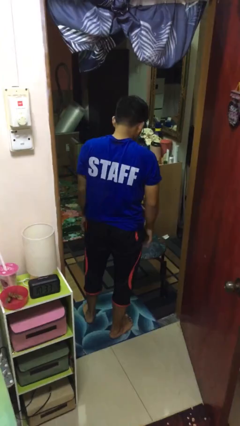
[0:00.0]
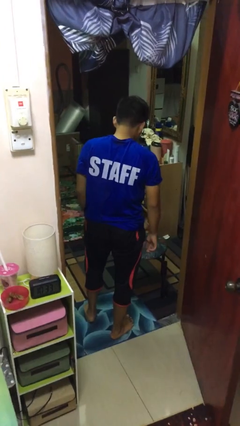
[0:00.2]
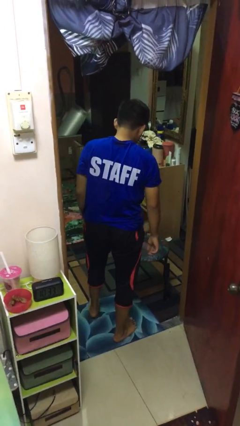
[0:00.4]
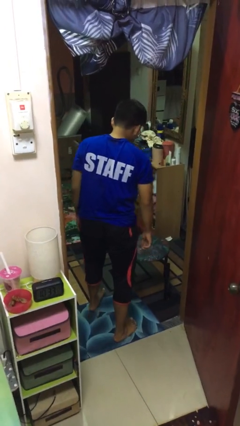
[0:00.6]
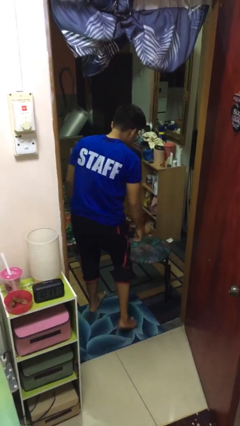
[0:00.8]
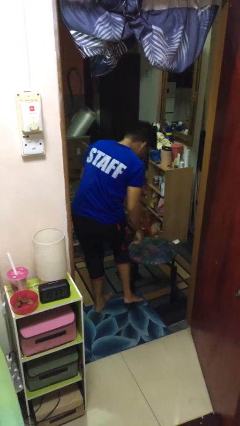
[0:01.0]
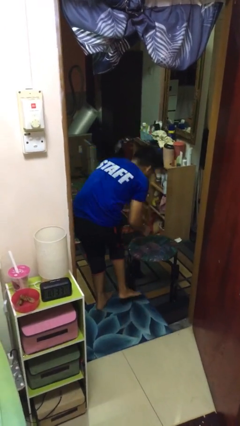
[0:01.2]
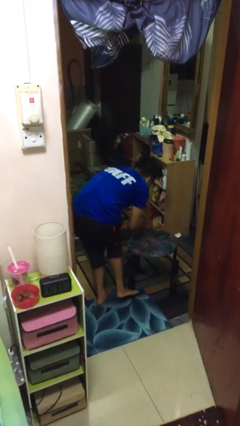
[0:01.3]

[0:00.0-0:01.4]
person trips on object on floor

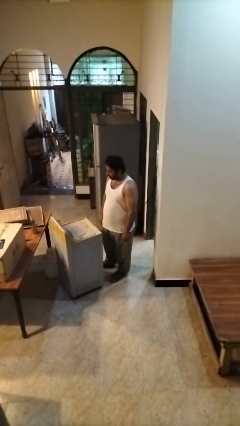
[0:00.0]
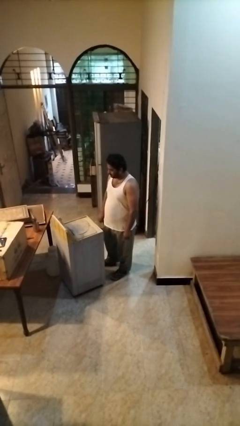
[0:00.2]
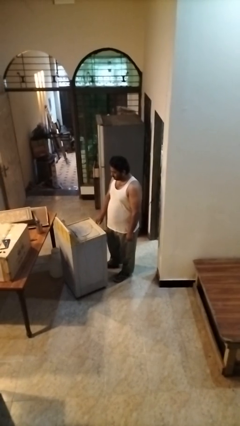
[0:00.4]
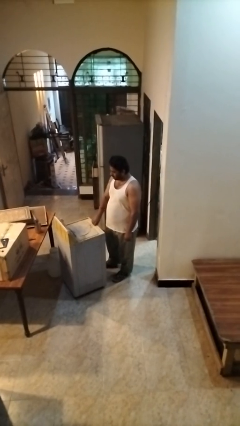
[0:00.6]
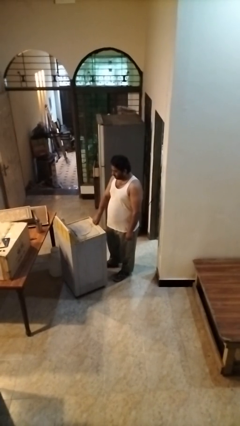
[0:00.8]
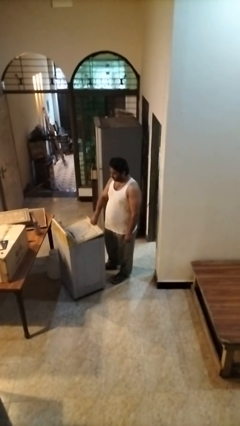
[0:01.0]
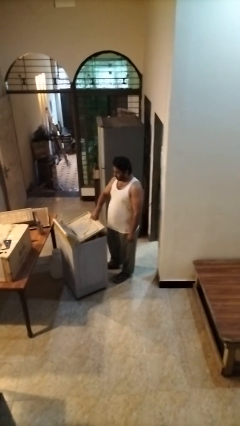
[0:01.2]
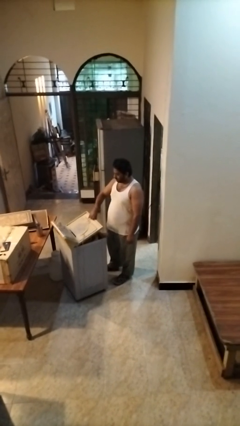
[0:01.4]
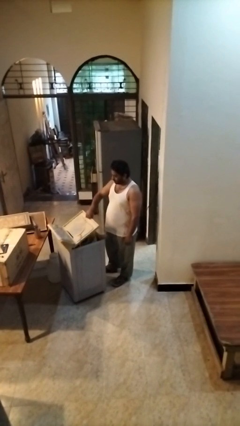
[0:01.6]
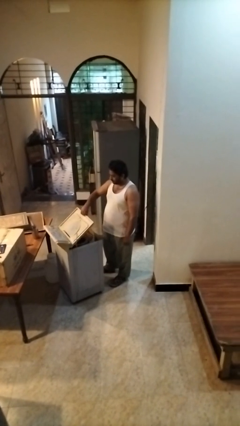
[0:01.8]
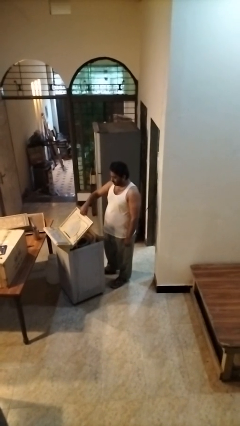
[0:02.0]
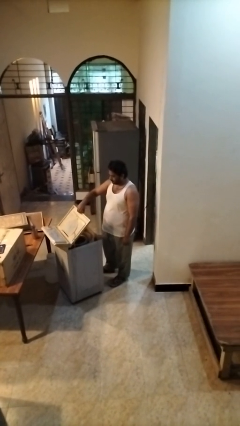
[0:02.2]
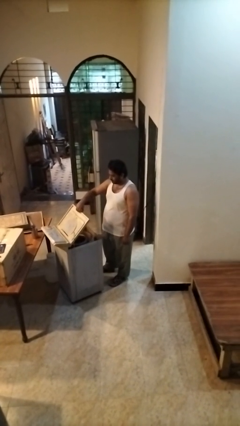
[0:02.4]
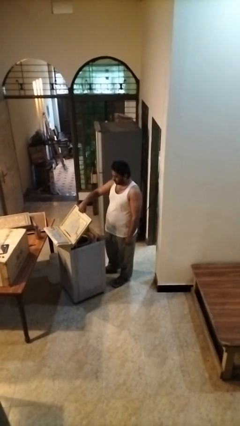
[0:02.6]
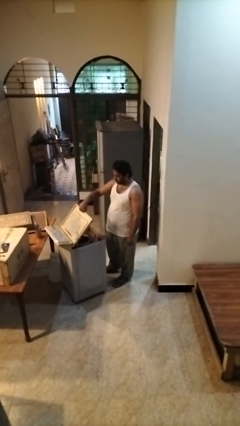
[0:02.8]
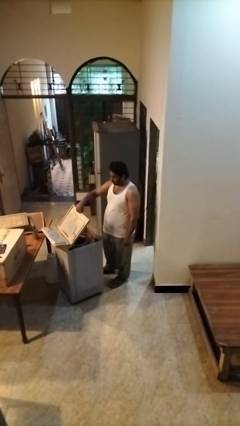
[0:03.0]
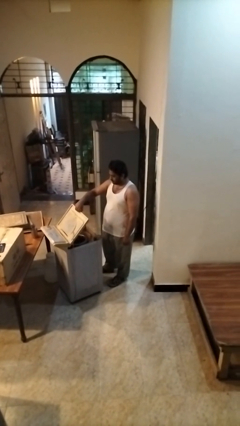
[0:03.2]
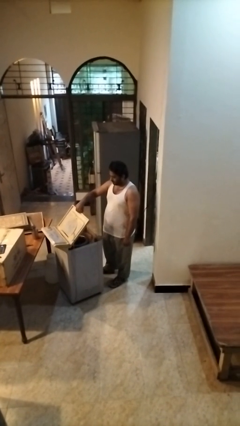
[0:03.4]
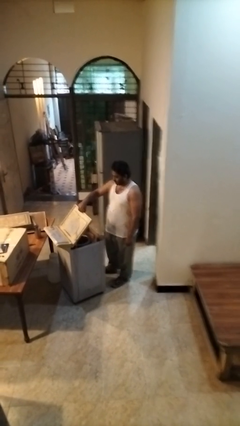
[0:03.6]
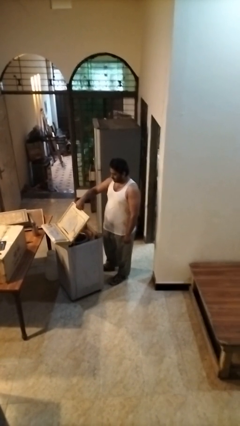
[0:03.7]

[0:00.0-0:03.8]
person opens clothes washer

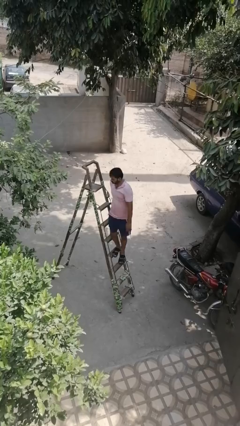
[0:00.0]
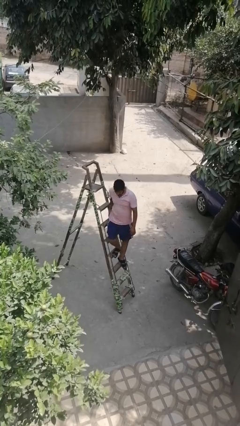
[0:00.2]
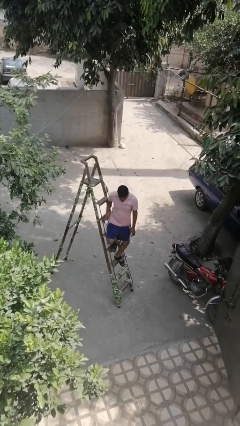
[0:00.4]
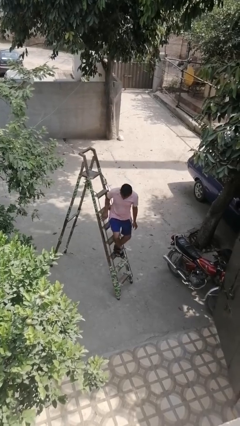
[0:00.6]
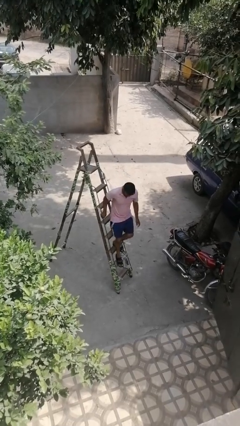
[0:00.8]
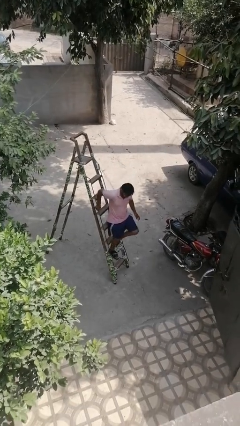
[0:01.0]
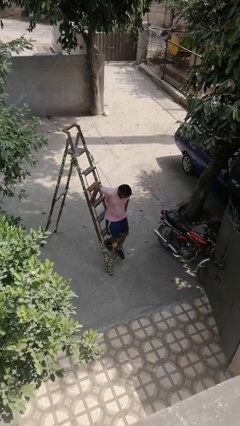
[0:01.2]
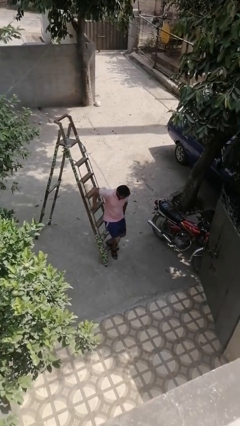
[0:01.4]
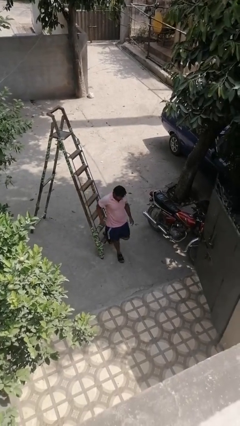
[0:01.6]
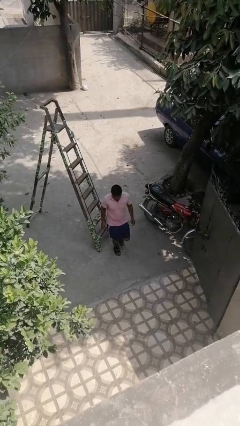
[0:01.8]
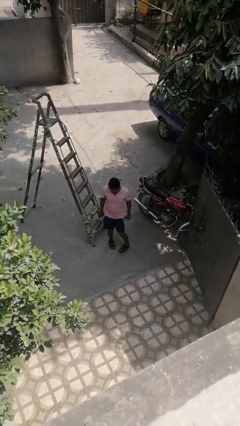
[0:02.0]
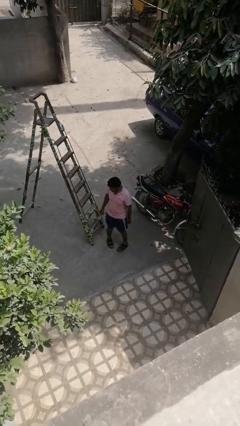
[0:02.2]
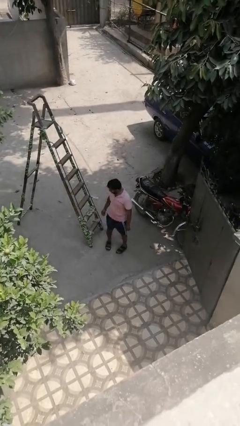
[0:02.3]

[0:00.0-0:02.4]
person climbs down ladder

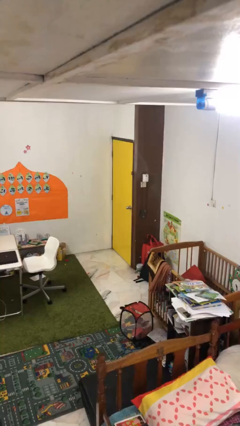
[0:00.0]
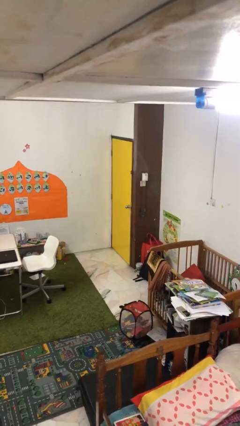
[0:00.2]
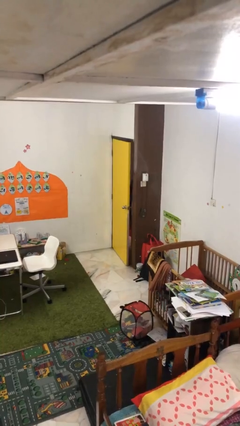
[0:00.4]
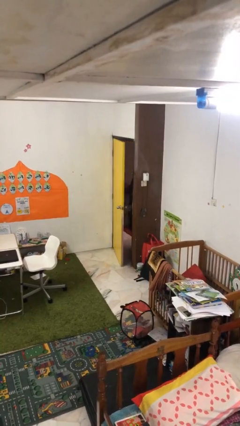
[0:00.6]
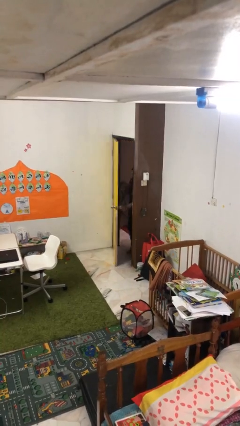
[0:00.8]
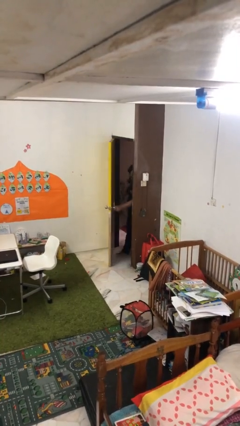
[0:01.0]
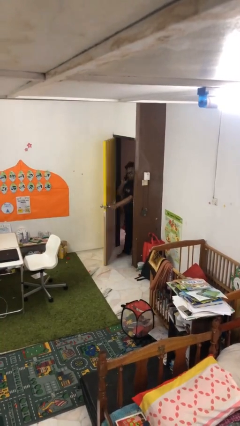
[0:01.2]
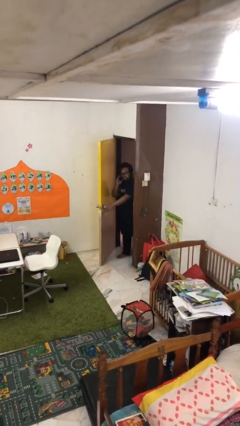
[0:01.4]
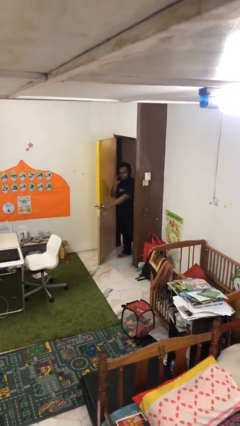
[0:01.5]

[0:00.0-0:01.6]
person opens facility door

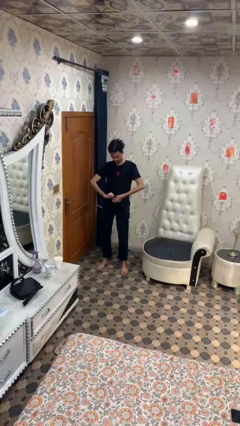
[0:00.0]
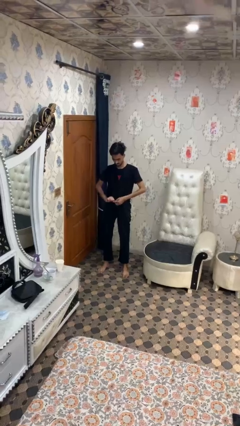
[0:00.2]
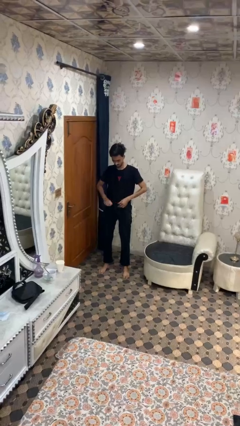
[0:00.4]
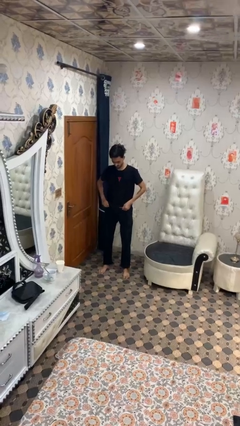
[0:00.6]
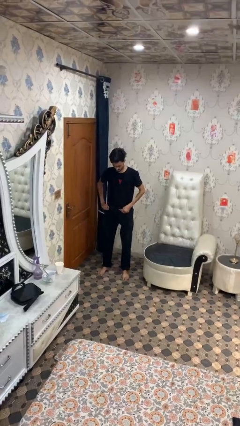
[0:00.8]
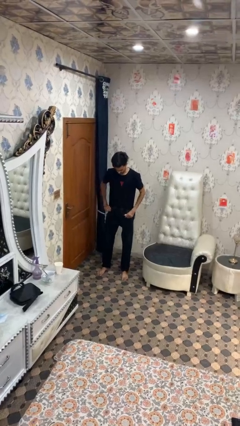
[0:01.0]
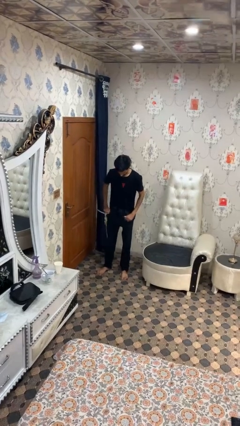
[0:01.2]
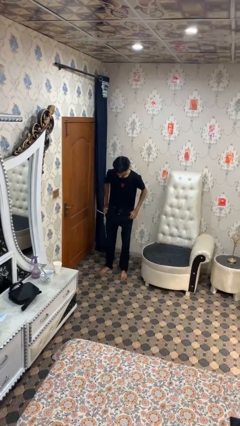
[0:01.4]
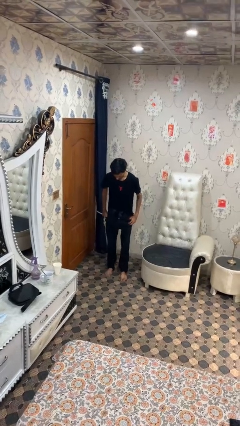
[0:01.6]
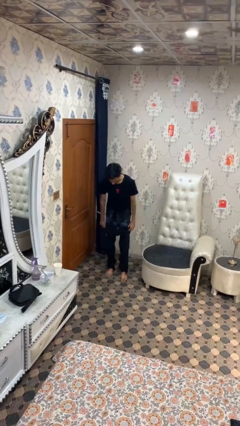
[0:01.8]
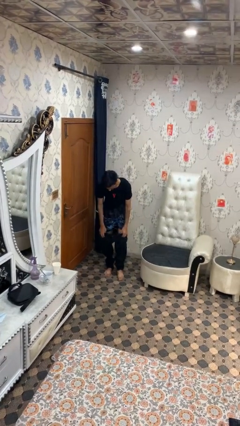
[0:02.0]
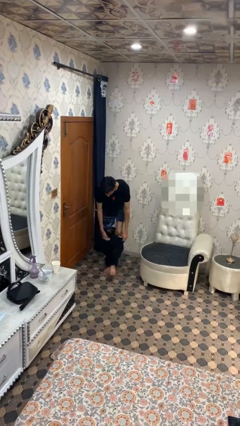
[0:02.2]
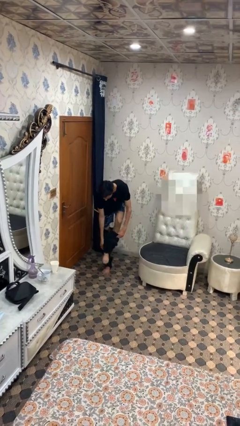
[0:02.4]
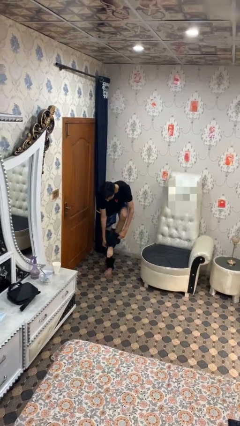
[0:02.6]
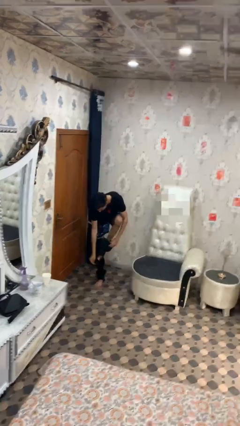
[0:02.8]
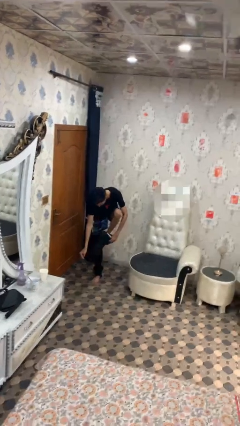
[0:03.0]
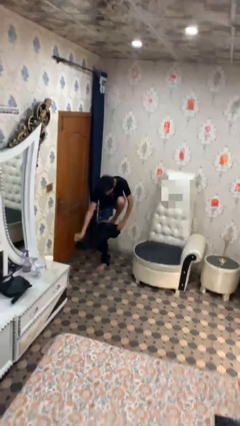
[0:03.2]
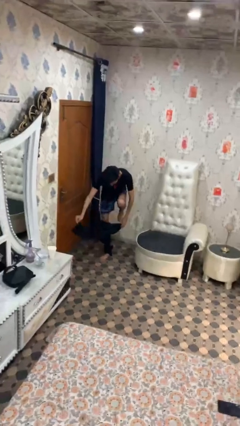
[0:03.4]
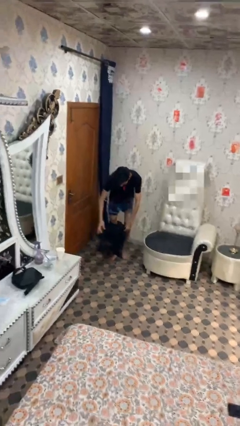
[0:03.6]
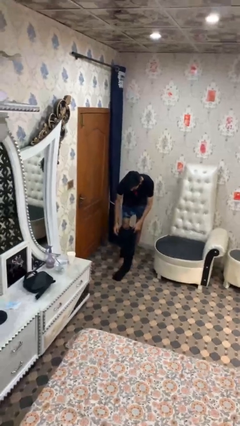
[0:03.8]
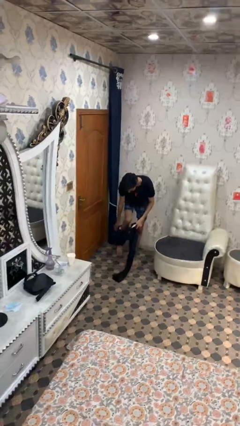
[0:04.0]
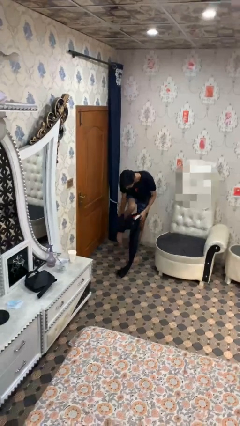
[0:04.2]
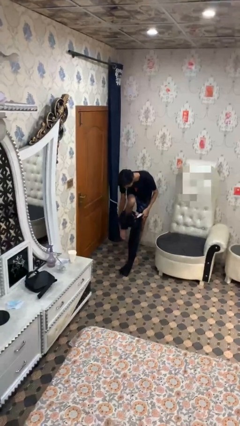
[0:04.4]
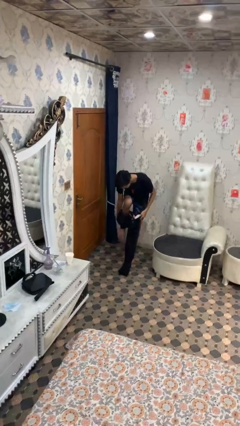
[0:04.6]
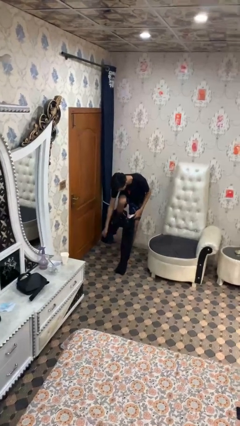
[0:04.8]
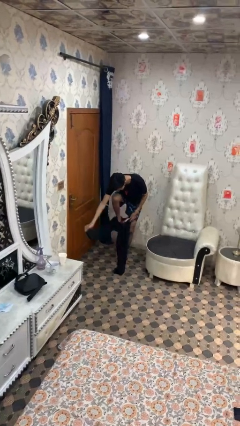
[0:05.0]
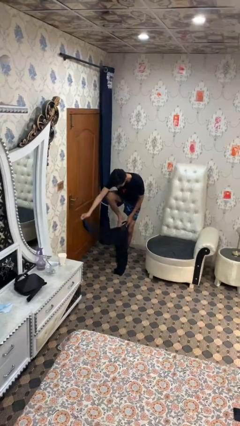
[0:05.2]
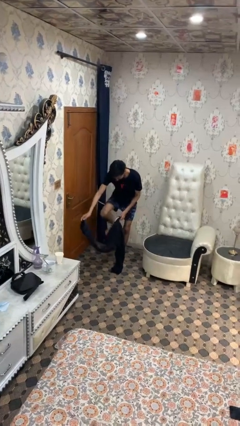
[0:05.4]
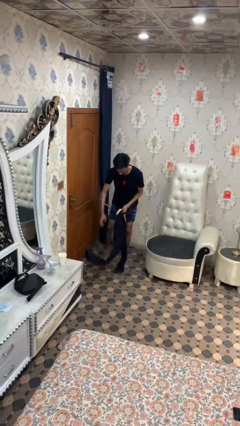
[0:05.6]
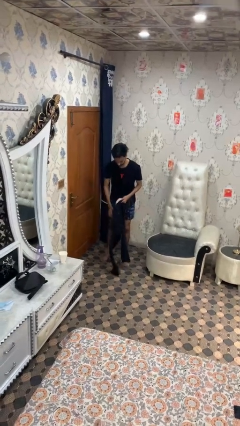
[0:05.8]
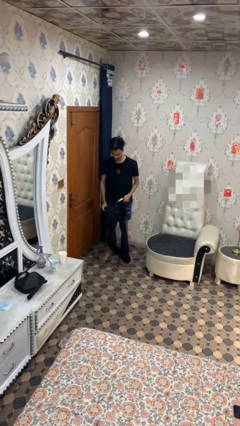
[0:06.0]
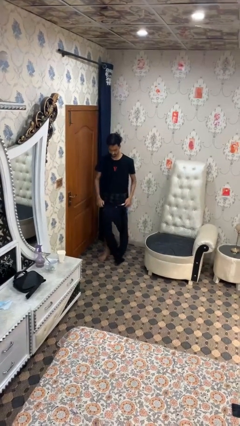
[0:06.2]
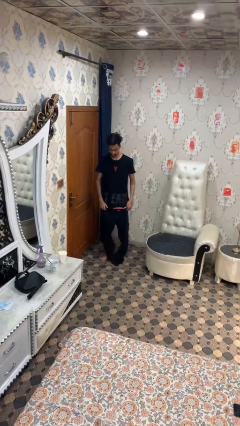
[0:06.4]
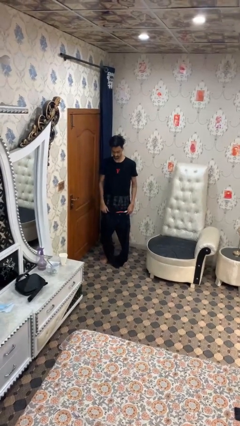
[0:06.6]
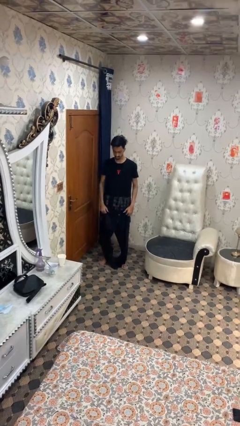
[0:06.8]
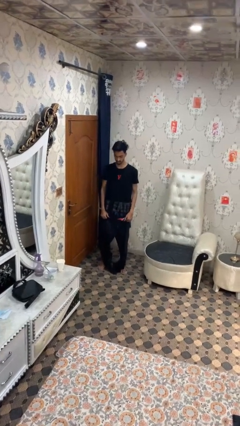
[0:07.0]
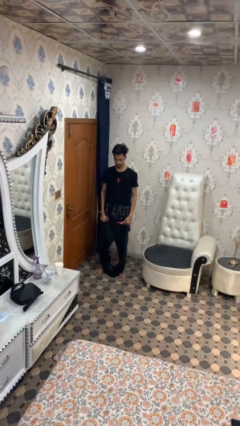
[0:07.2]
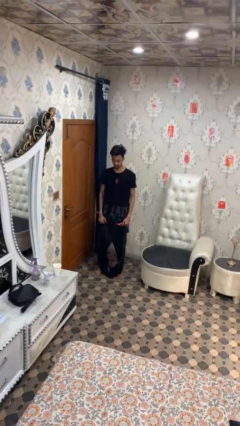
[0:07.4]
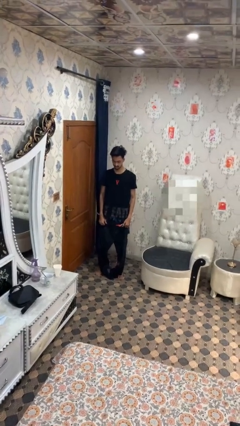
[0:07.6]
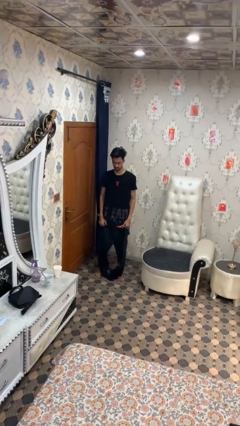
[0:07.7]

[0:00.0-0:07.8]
person takes off pants

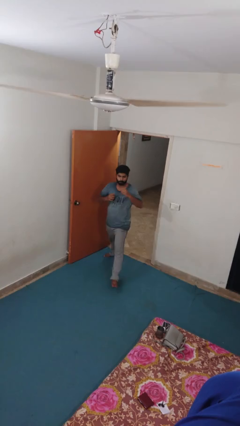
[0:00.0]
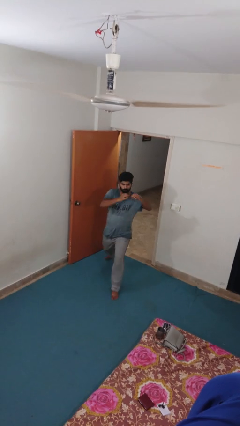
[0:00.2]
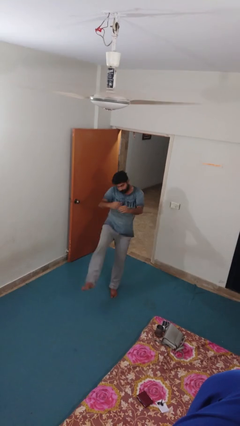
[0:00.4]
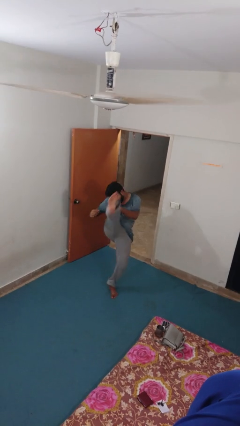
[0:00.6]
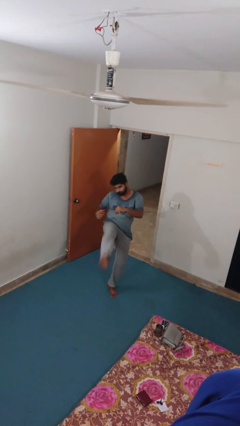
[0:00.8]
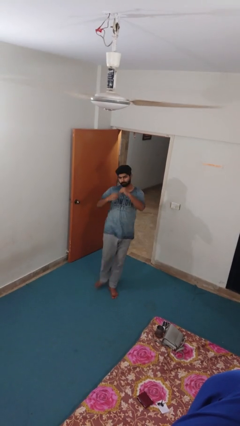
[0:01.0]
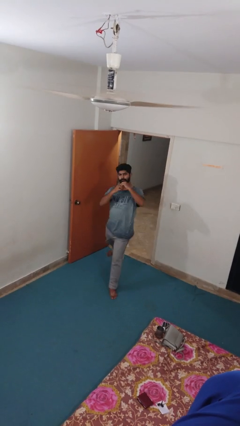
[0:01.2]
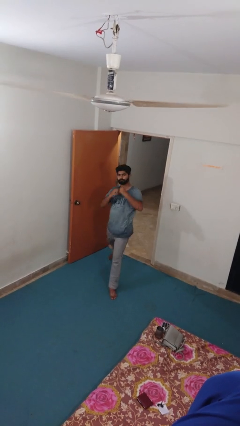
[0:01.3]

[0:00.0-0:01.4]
person karate kicks
